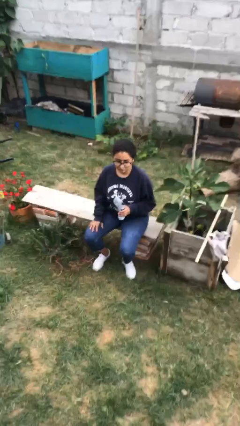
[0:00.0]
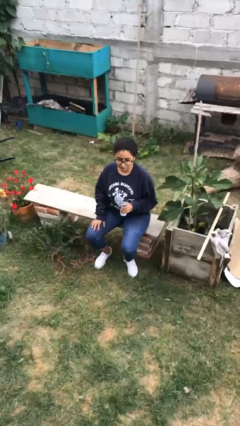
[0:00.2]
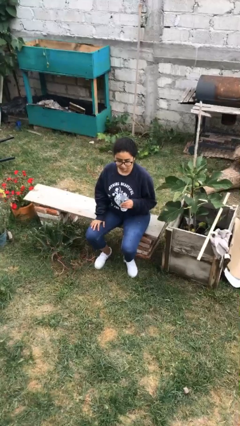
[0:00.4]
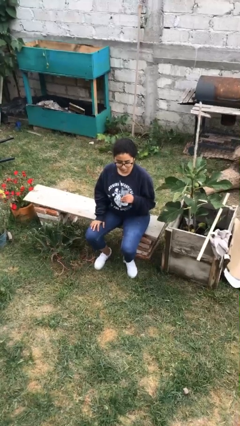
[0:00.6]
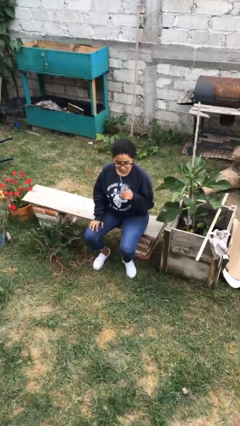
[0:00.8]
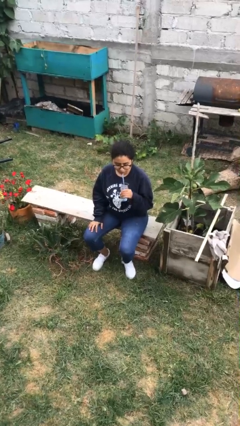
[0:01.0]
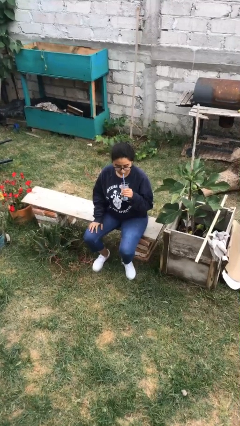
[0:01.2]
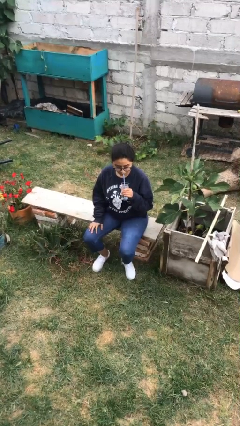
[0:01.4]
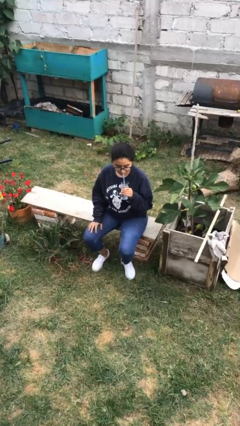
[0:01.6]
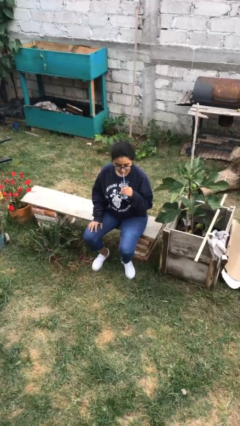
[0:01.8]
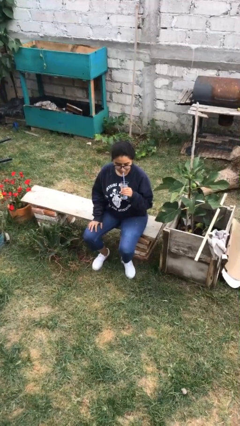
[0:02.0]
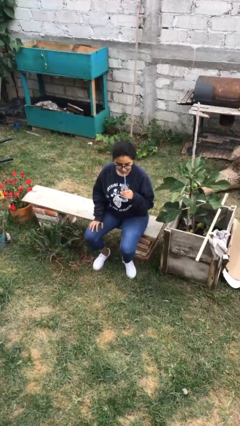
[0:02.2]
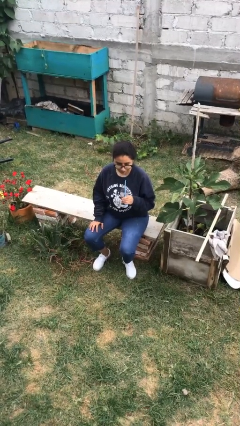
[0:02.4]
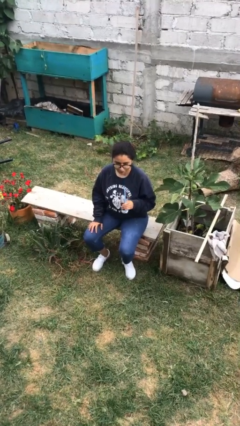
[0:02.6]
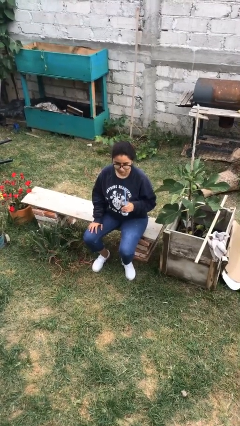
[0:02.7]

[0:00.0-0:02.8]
person drinks from straw

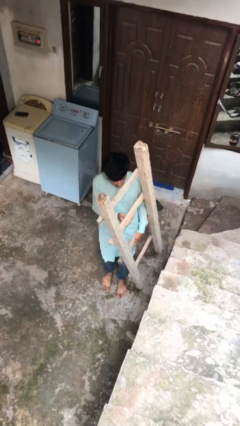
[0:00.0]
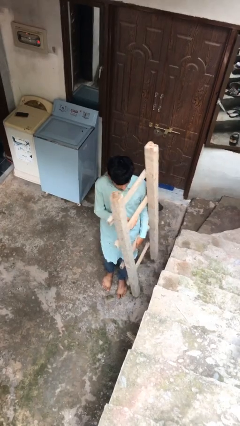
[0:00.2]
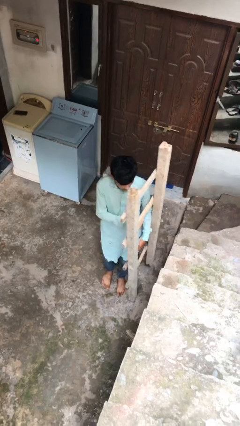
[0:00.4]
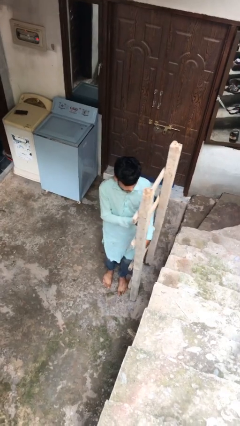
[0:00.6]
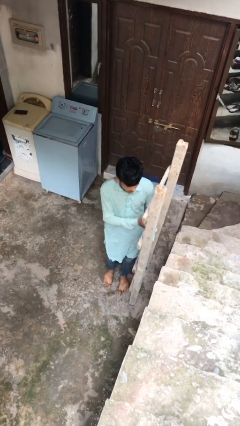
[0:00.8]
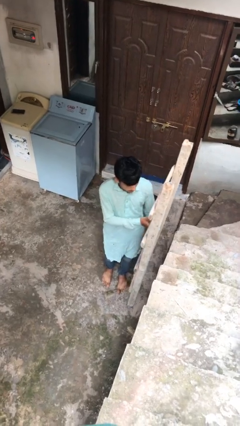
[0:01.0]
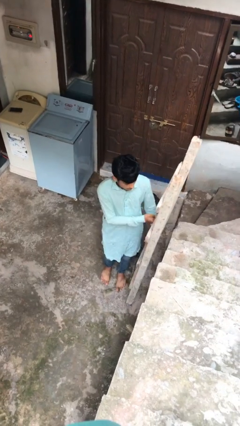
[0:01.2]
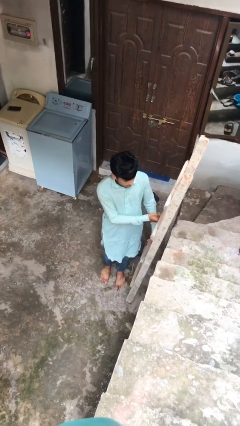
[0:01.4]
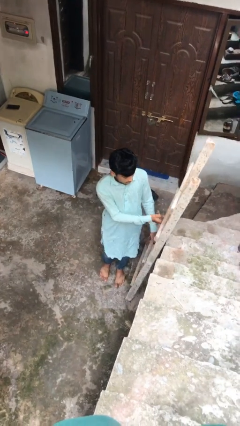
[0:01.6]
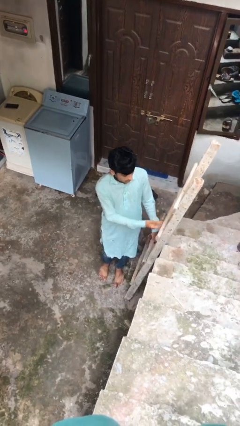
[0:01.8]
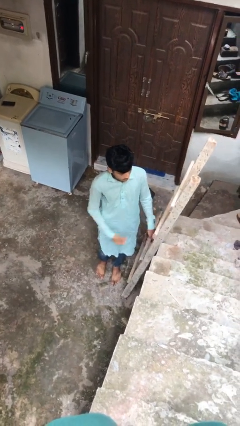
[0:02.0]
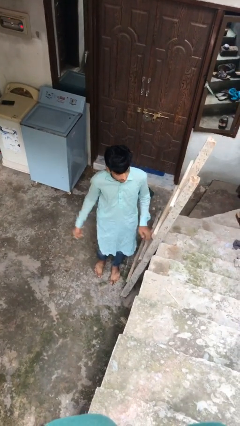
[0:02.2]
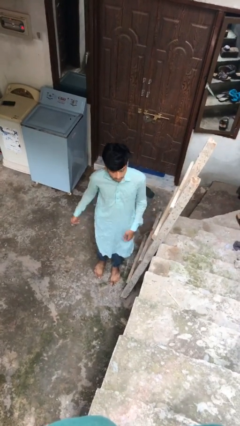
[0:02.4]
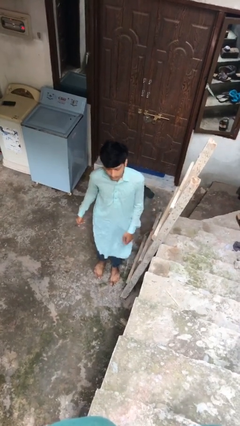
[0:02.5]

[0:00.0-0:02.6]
person puts down object on floor

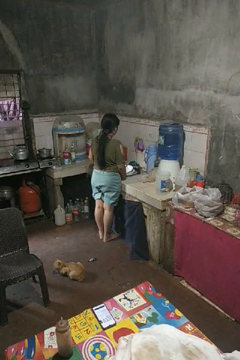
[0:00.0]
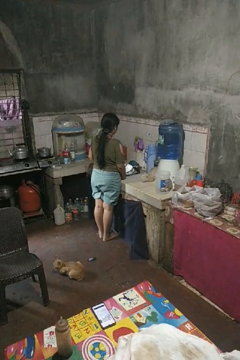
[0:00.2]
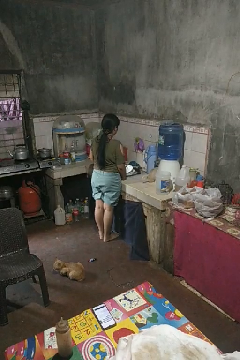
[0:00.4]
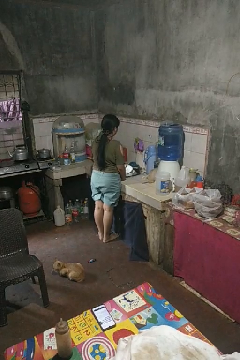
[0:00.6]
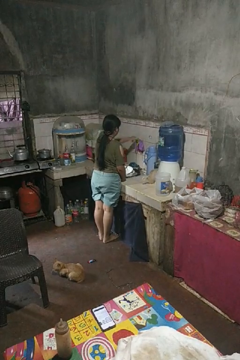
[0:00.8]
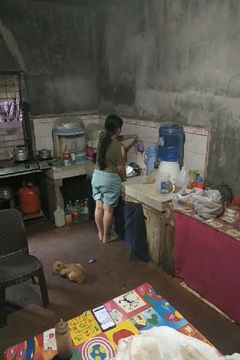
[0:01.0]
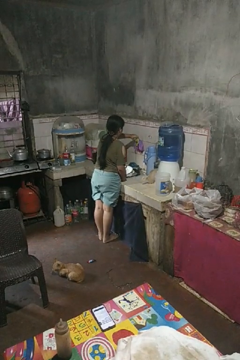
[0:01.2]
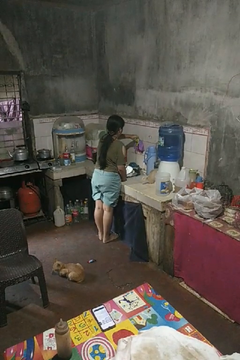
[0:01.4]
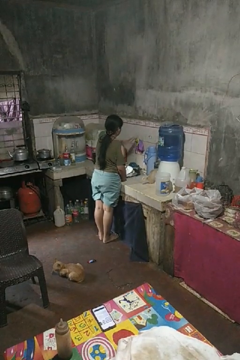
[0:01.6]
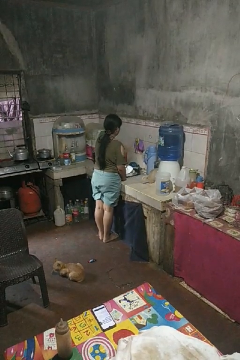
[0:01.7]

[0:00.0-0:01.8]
person turns off faucet

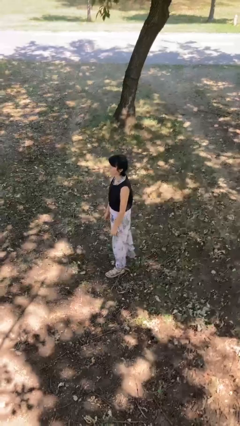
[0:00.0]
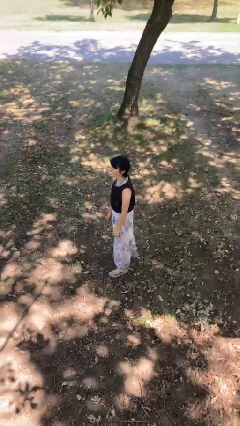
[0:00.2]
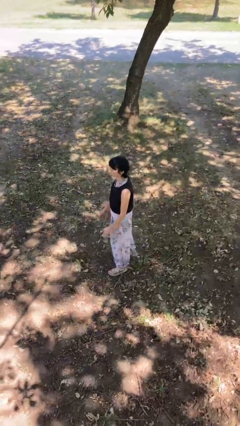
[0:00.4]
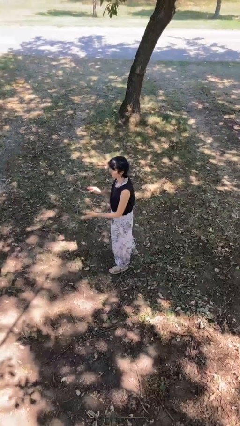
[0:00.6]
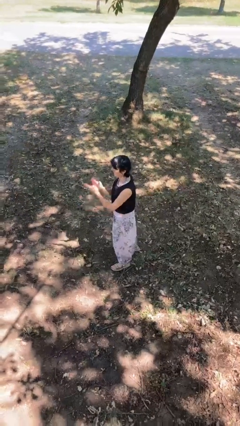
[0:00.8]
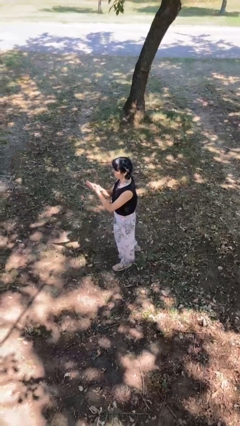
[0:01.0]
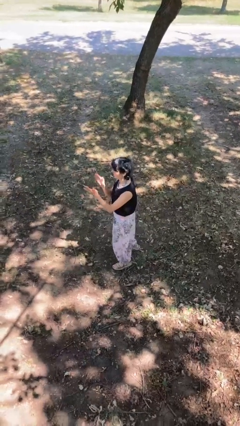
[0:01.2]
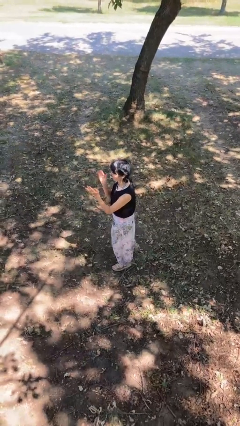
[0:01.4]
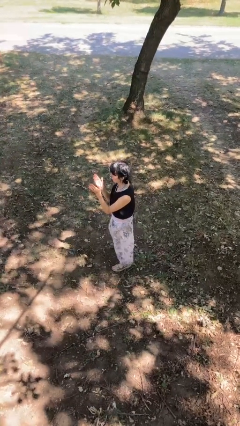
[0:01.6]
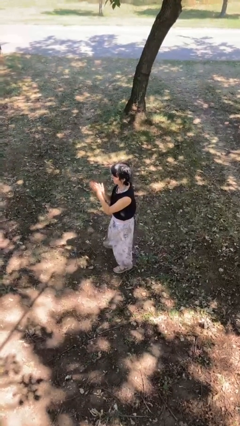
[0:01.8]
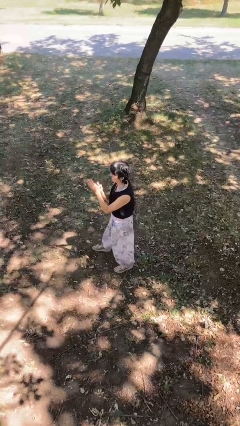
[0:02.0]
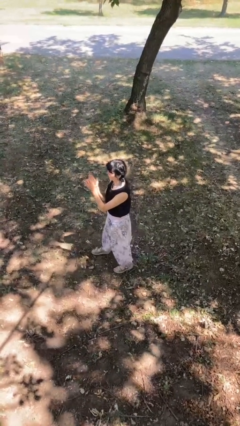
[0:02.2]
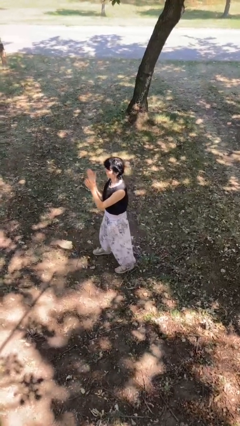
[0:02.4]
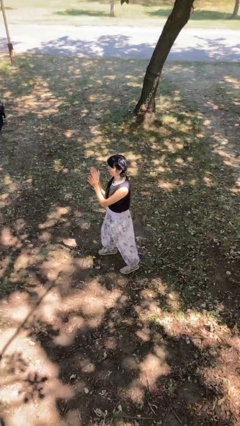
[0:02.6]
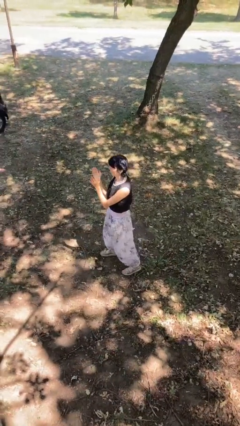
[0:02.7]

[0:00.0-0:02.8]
person claps hands

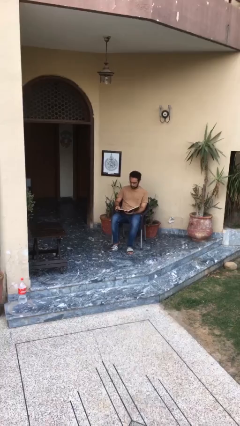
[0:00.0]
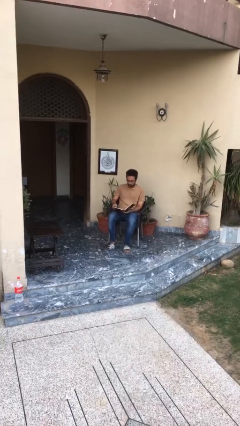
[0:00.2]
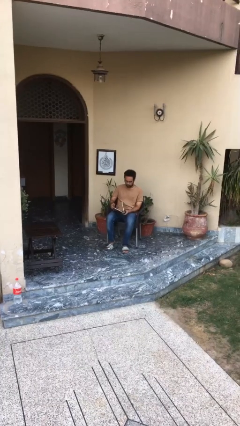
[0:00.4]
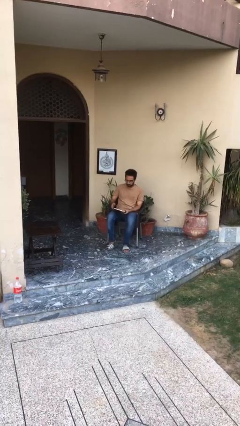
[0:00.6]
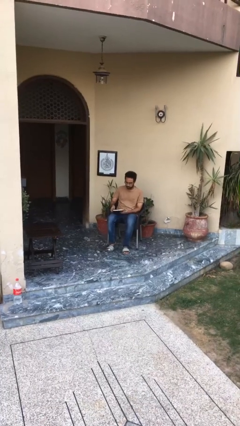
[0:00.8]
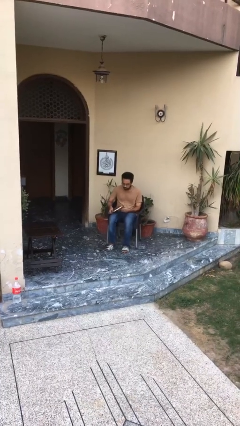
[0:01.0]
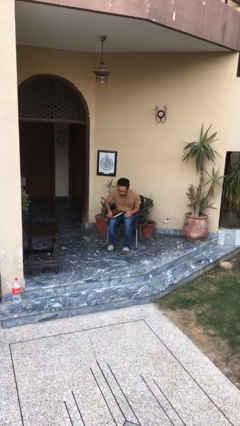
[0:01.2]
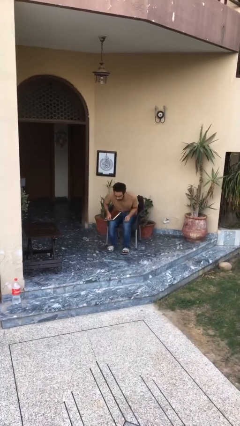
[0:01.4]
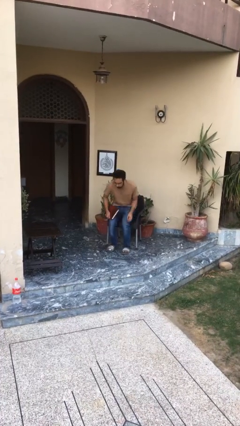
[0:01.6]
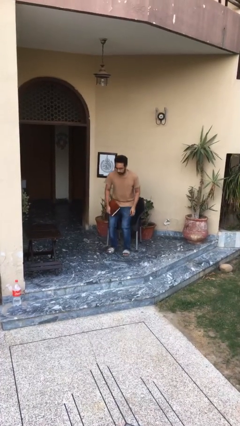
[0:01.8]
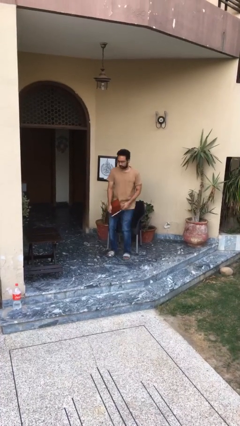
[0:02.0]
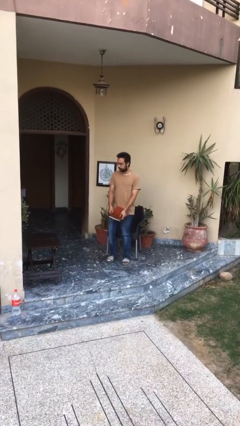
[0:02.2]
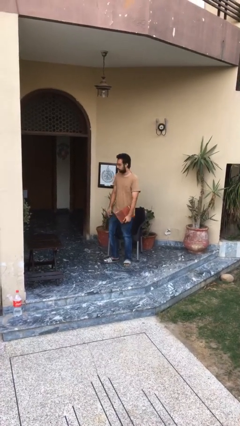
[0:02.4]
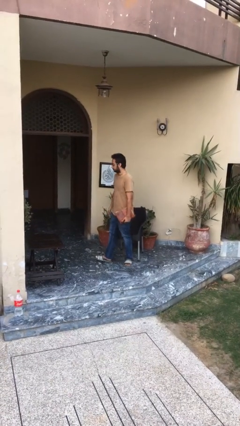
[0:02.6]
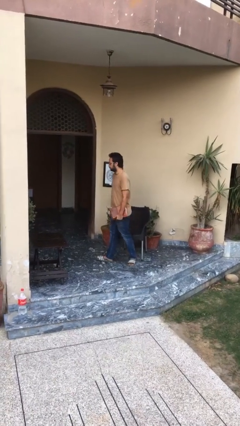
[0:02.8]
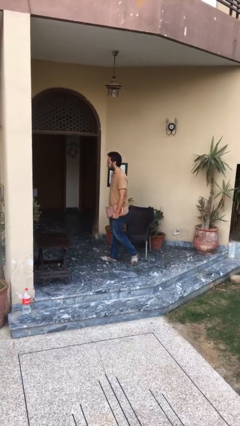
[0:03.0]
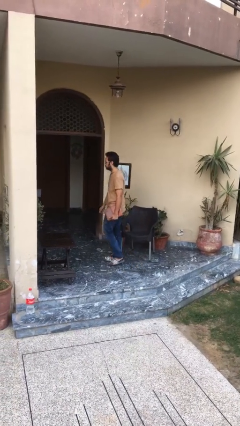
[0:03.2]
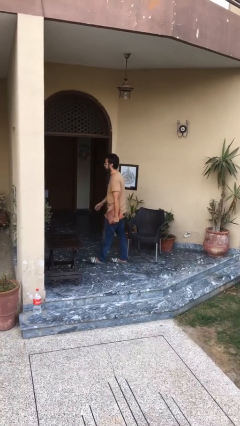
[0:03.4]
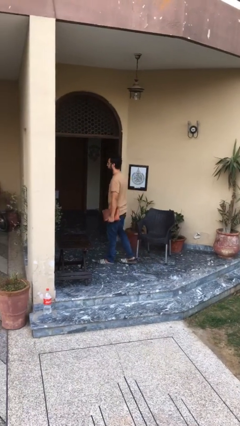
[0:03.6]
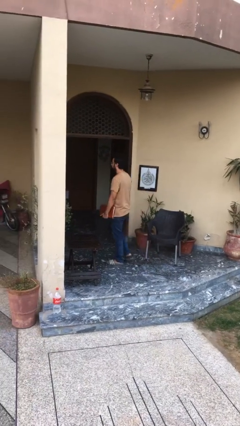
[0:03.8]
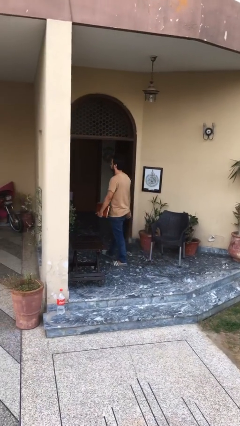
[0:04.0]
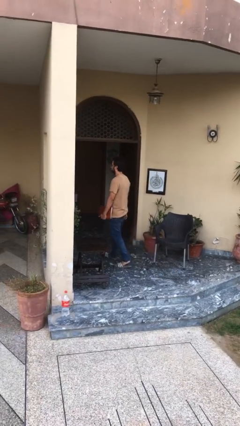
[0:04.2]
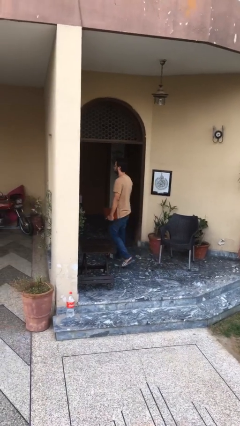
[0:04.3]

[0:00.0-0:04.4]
person stands up

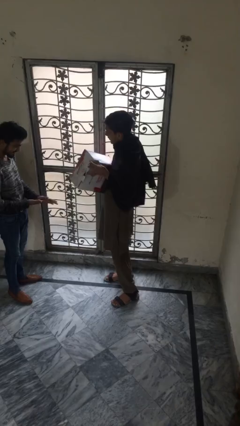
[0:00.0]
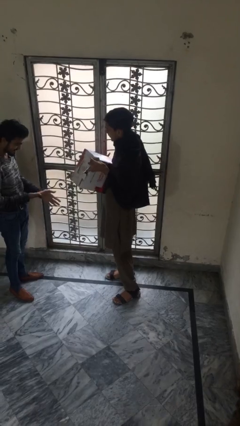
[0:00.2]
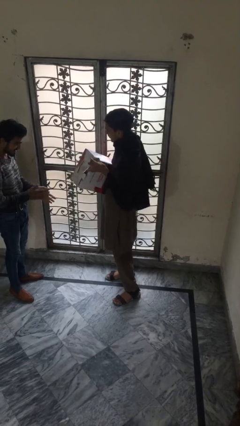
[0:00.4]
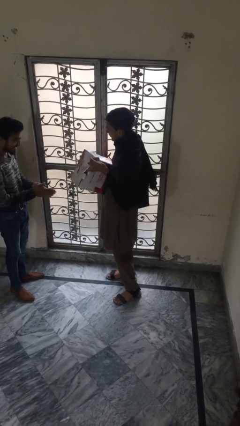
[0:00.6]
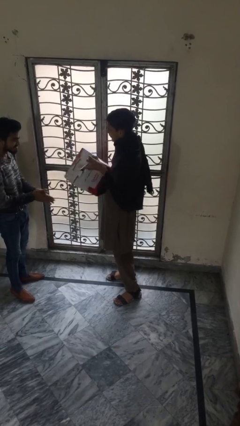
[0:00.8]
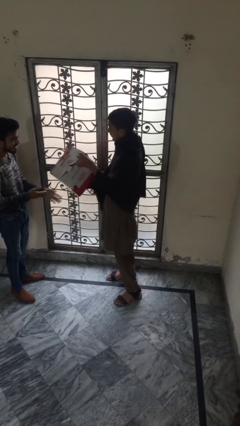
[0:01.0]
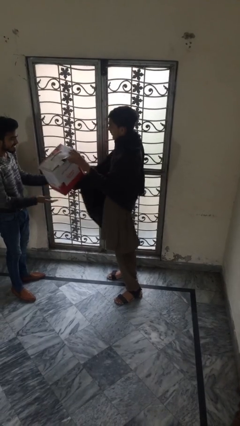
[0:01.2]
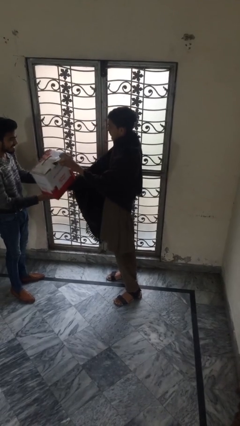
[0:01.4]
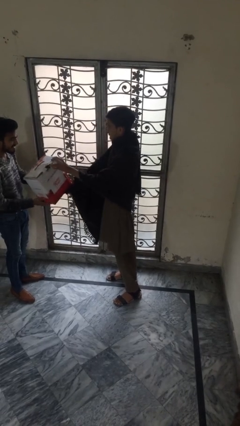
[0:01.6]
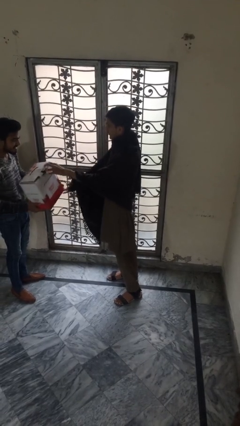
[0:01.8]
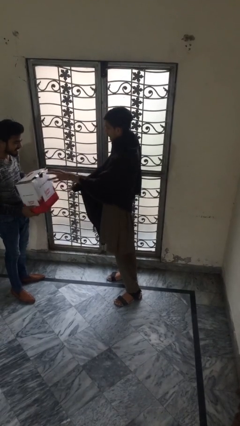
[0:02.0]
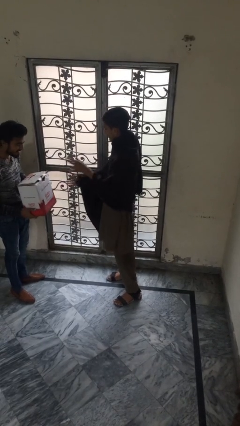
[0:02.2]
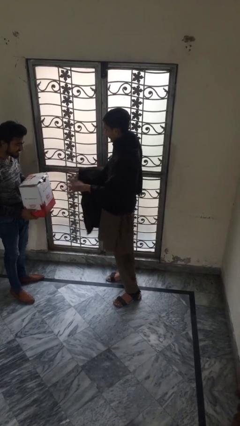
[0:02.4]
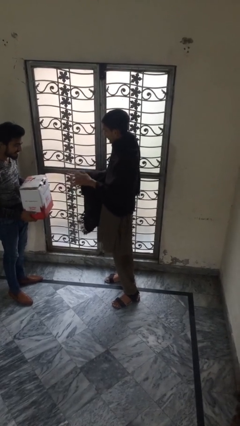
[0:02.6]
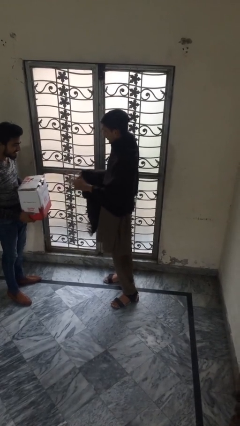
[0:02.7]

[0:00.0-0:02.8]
person transfers object to person

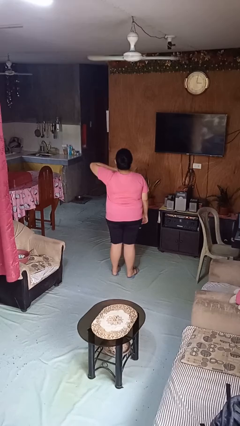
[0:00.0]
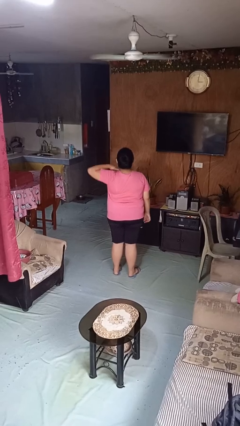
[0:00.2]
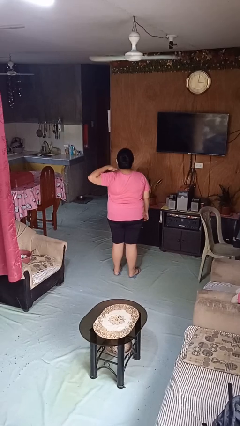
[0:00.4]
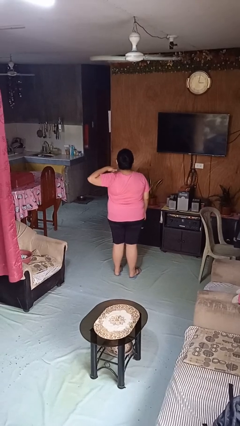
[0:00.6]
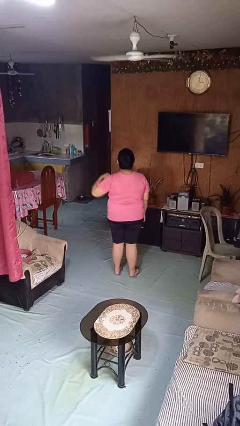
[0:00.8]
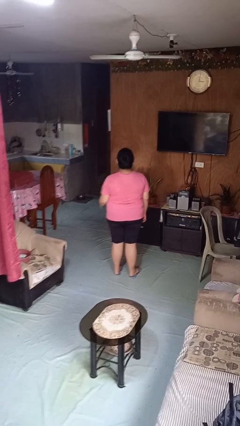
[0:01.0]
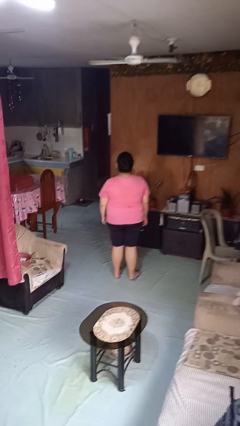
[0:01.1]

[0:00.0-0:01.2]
person gestures cut
